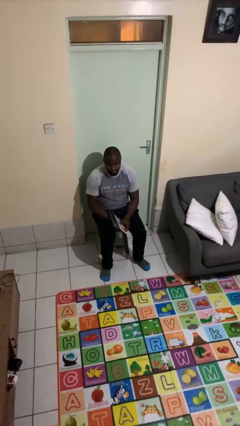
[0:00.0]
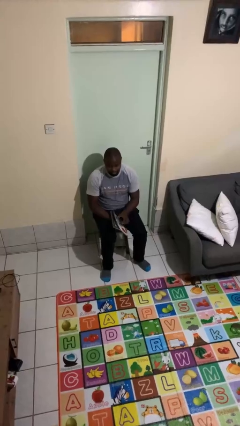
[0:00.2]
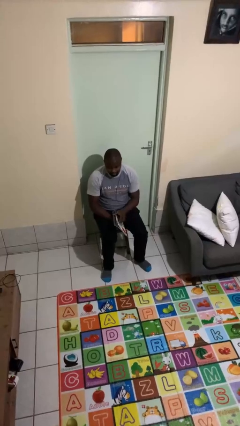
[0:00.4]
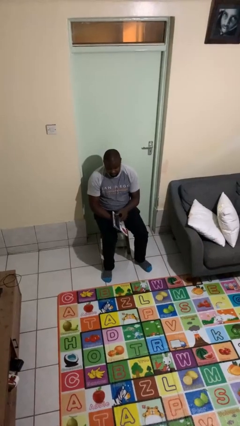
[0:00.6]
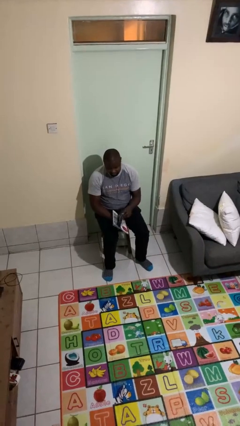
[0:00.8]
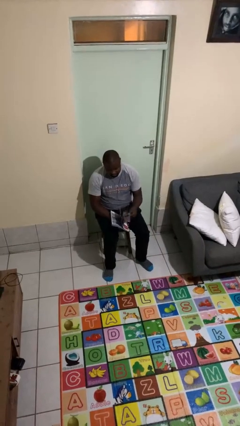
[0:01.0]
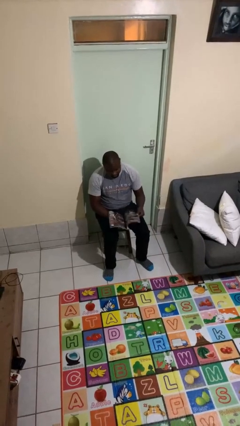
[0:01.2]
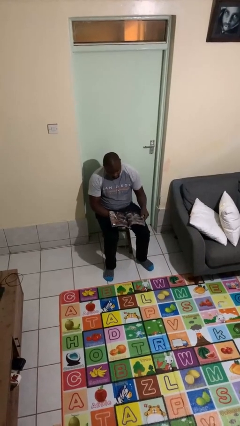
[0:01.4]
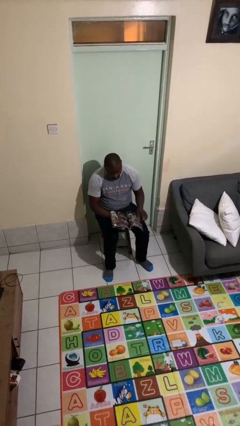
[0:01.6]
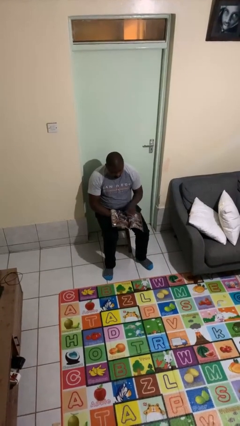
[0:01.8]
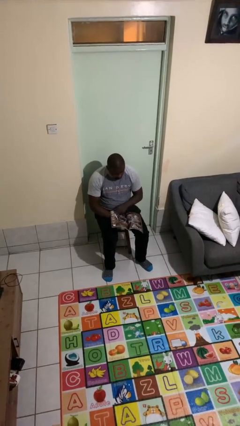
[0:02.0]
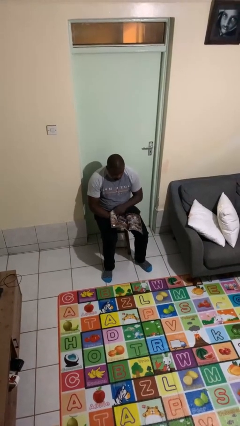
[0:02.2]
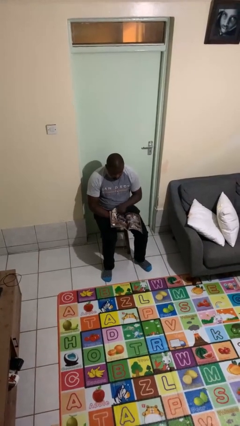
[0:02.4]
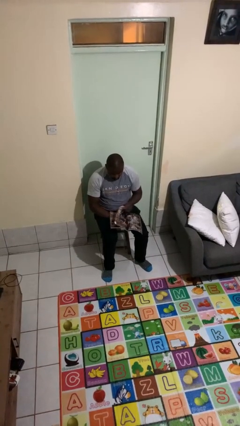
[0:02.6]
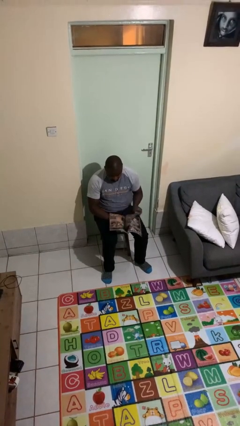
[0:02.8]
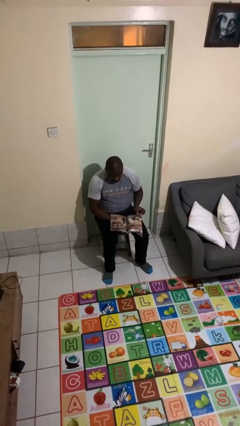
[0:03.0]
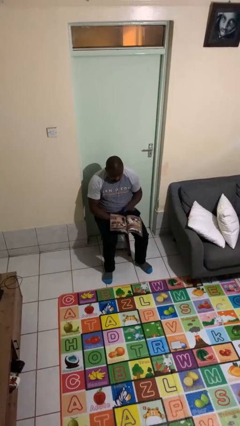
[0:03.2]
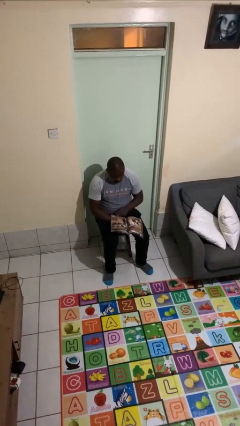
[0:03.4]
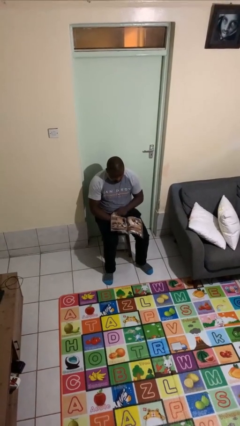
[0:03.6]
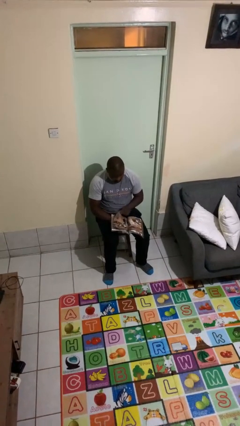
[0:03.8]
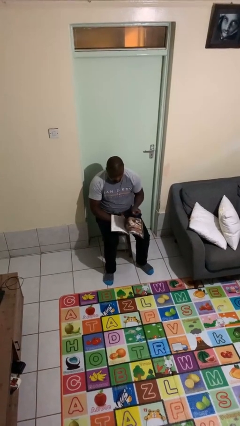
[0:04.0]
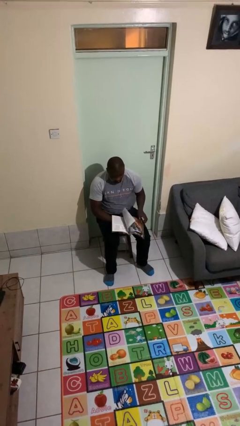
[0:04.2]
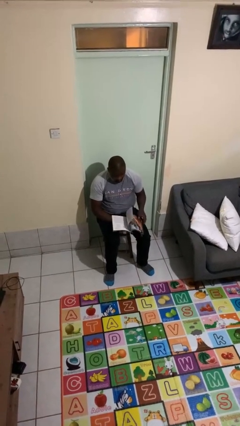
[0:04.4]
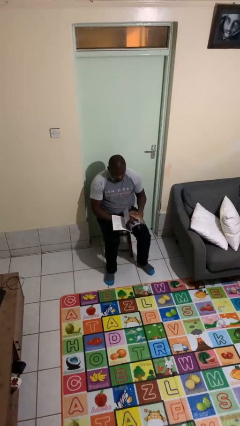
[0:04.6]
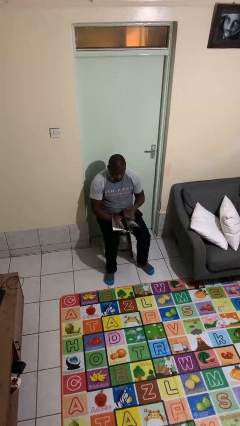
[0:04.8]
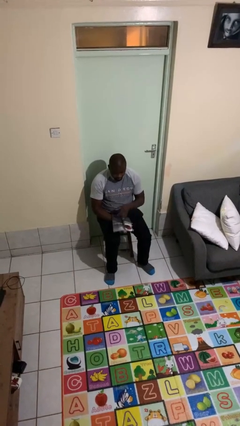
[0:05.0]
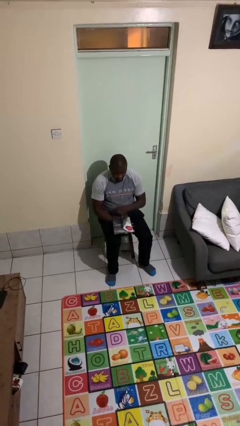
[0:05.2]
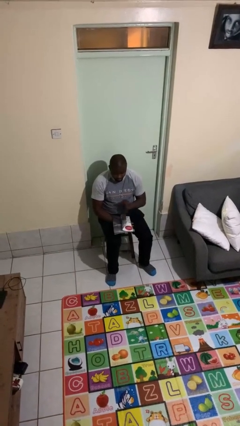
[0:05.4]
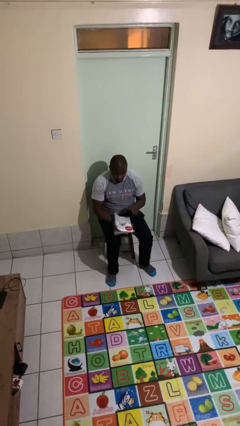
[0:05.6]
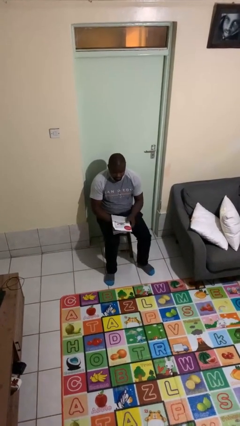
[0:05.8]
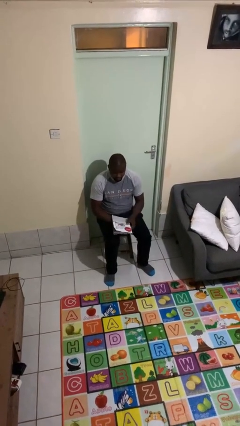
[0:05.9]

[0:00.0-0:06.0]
person reads magazine

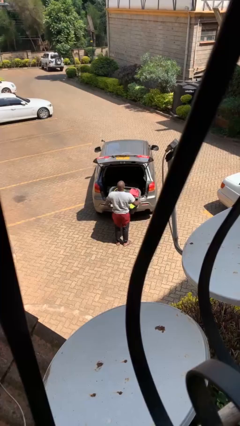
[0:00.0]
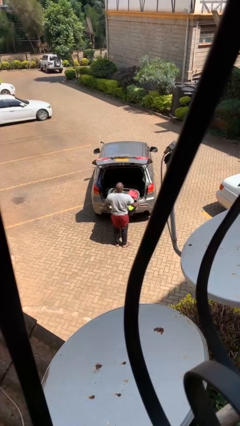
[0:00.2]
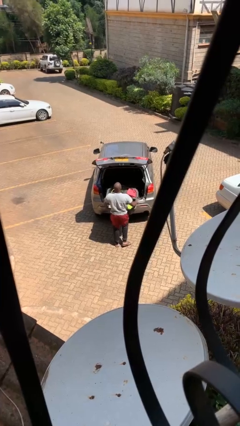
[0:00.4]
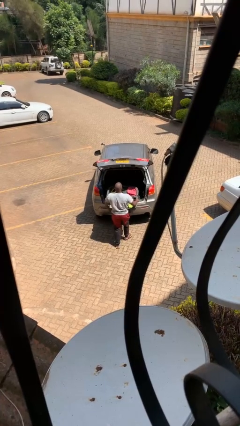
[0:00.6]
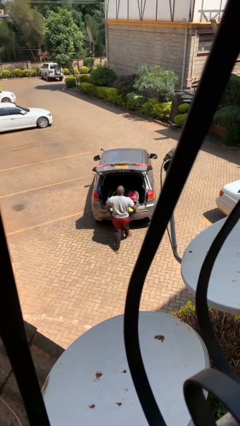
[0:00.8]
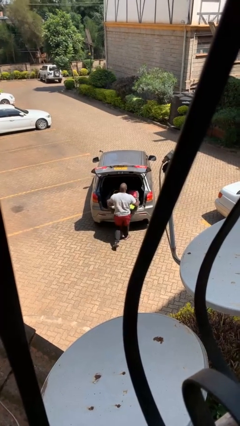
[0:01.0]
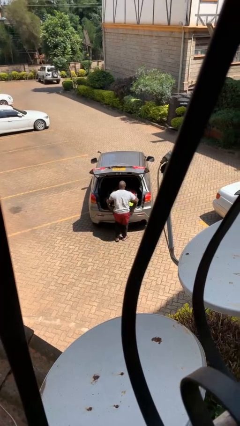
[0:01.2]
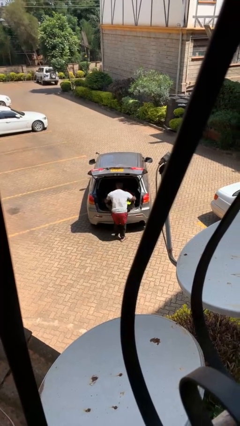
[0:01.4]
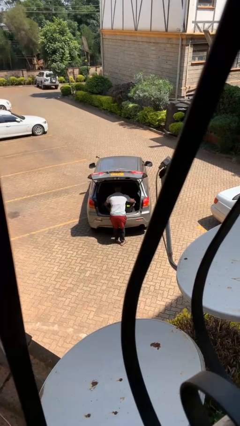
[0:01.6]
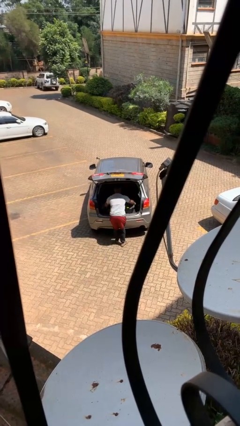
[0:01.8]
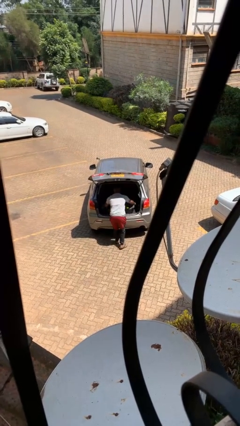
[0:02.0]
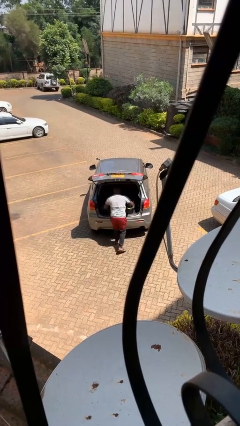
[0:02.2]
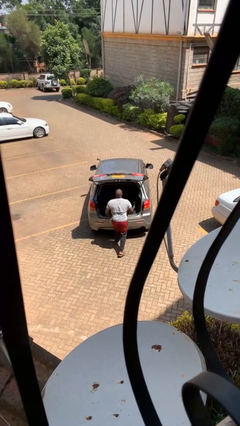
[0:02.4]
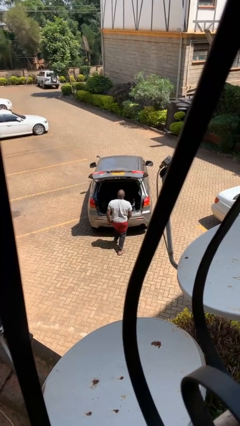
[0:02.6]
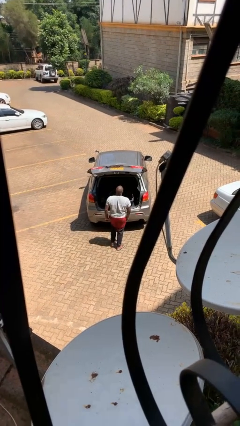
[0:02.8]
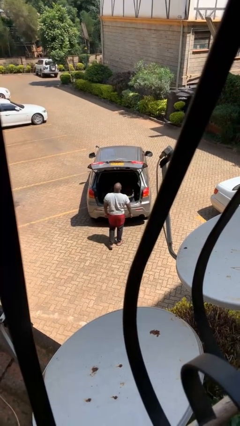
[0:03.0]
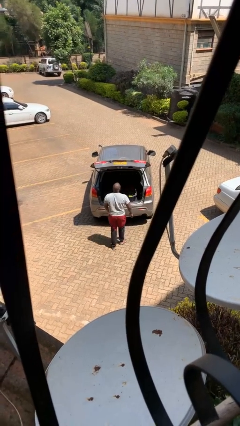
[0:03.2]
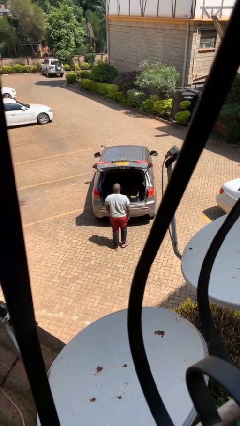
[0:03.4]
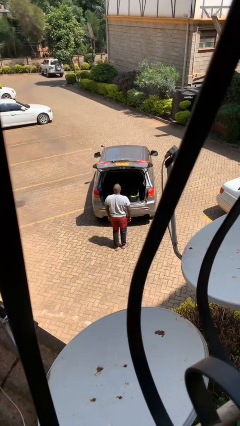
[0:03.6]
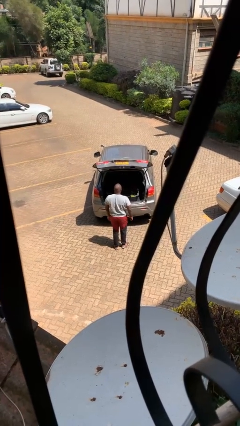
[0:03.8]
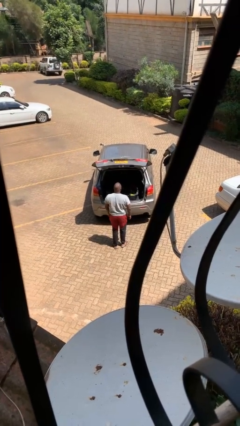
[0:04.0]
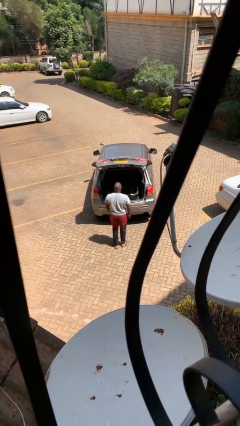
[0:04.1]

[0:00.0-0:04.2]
person loads car

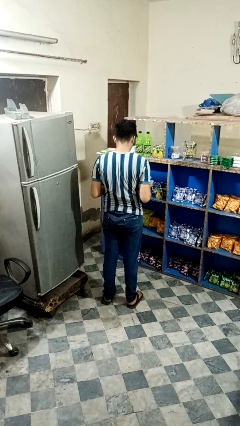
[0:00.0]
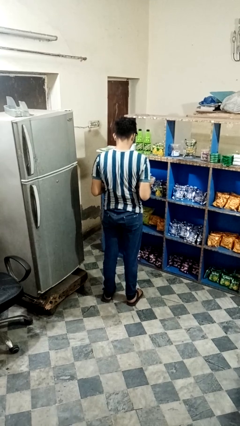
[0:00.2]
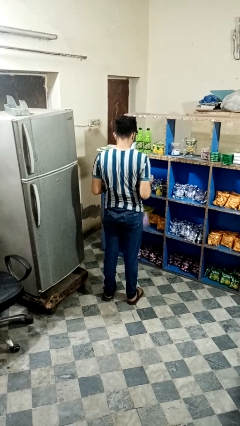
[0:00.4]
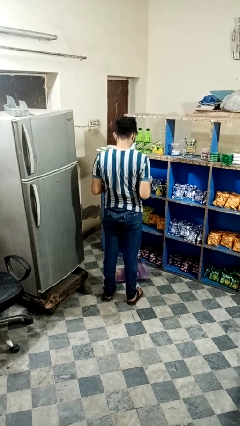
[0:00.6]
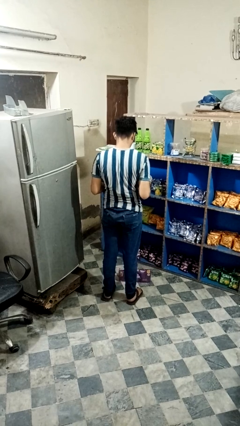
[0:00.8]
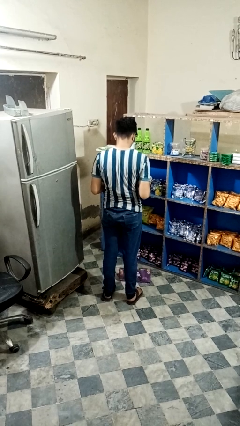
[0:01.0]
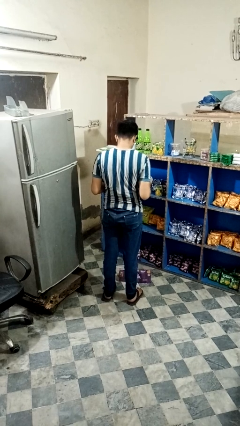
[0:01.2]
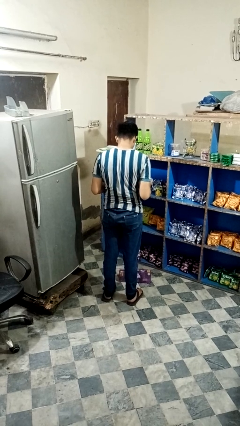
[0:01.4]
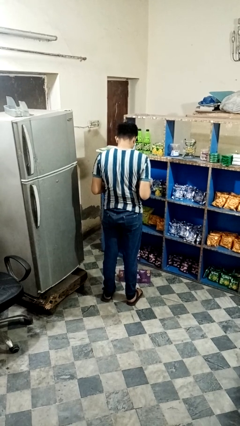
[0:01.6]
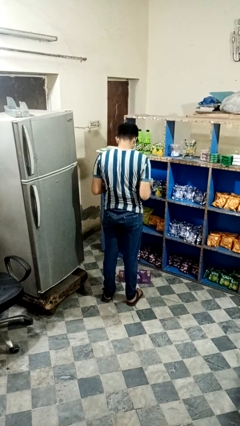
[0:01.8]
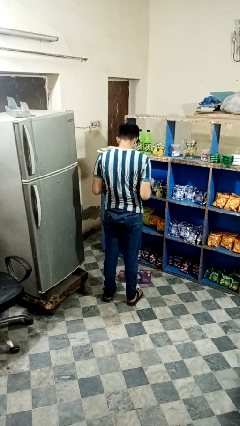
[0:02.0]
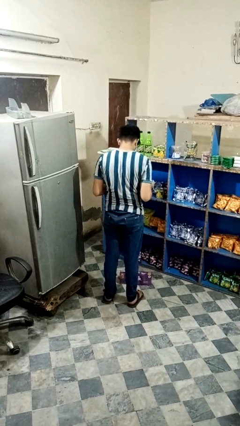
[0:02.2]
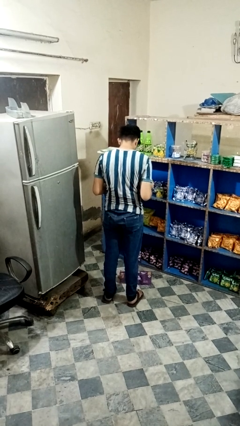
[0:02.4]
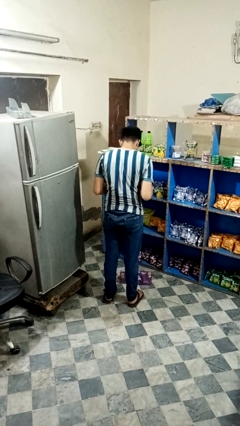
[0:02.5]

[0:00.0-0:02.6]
person drops object

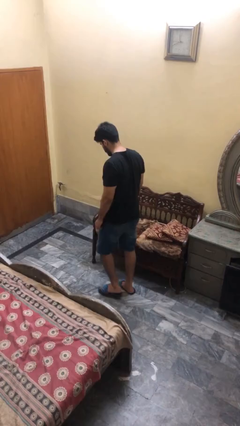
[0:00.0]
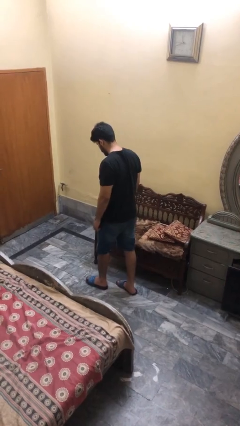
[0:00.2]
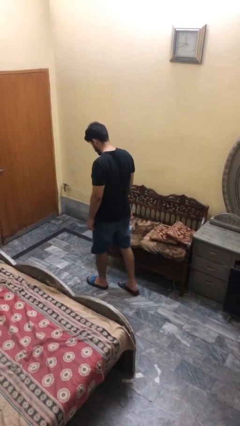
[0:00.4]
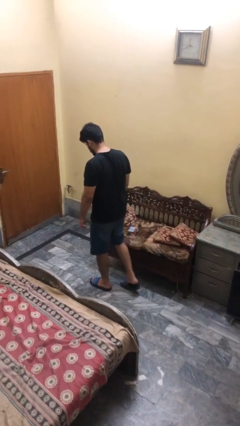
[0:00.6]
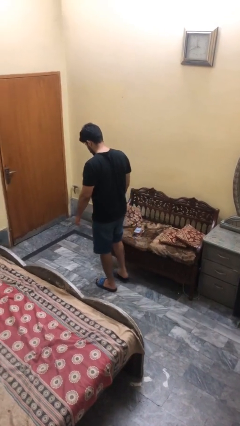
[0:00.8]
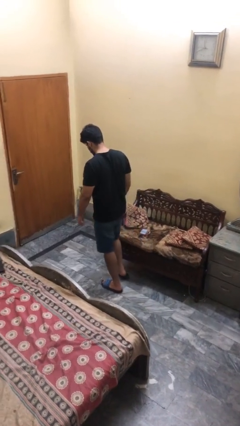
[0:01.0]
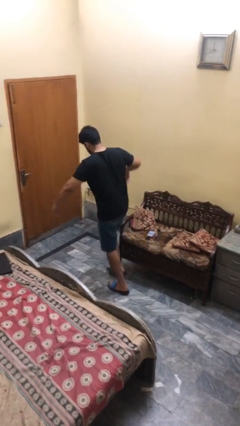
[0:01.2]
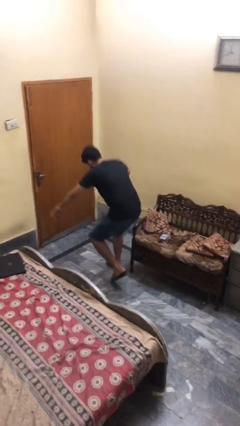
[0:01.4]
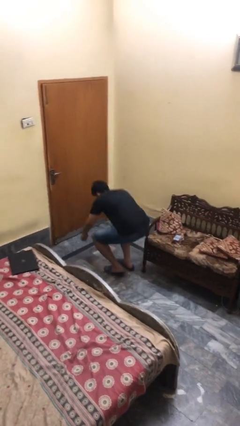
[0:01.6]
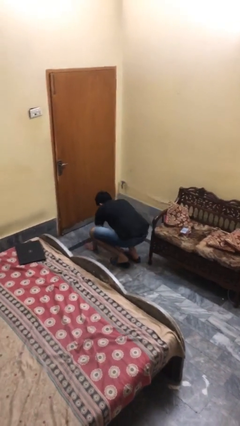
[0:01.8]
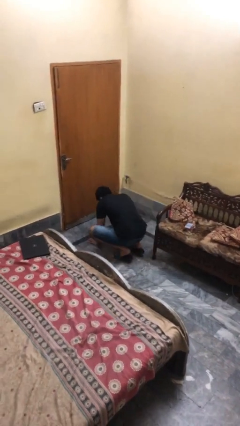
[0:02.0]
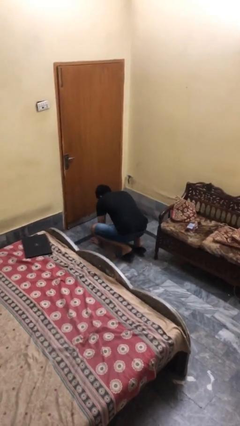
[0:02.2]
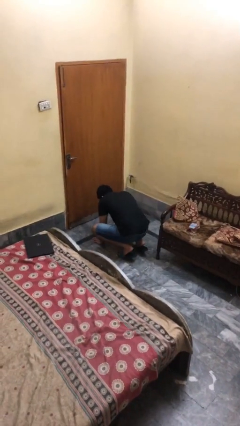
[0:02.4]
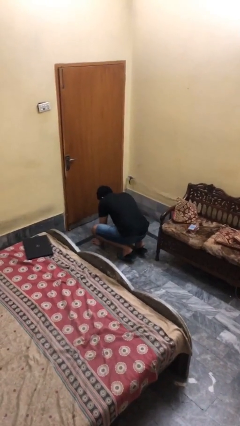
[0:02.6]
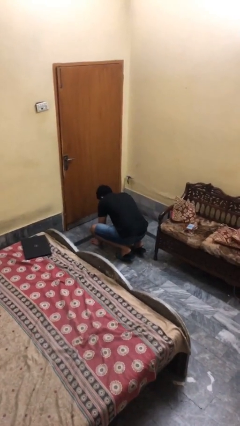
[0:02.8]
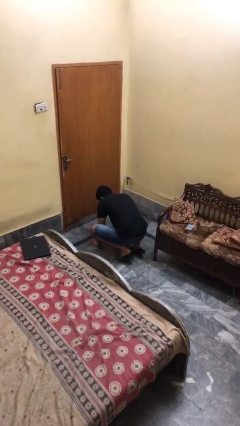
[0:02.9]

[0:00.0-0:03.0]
person trips on object on floor

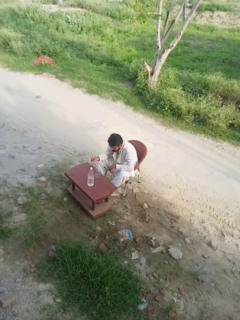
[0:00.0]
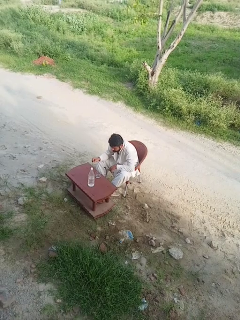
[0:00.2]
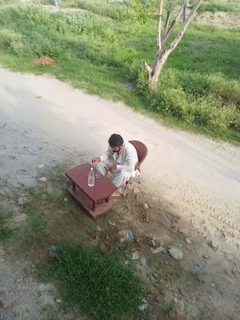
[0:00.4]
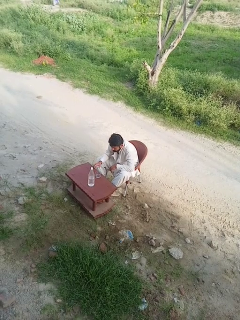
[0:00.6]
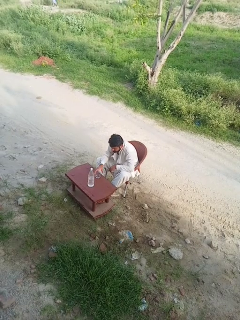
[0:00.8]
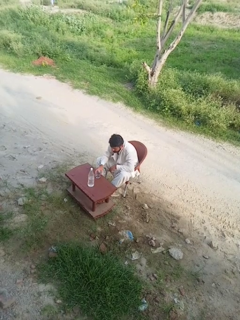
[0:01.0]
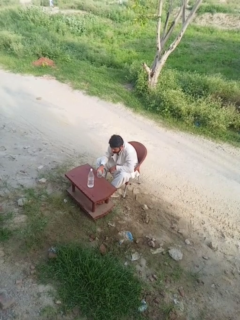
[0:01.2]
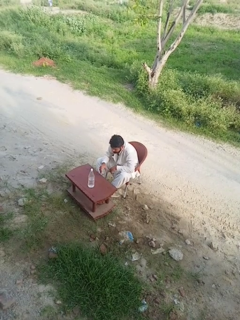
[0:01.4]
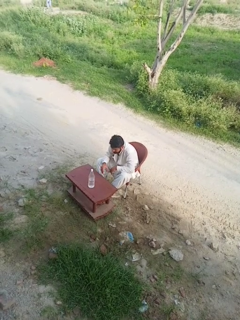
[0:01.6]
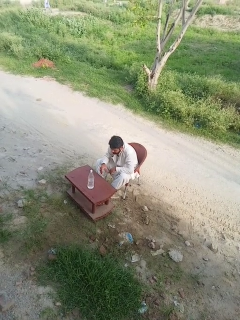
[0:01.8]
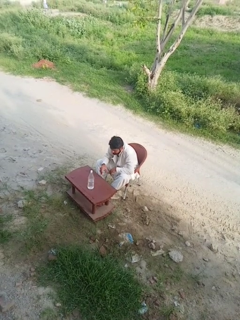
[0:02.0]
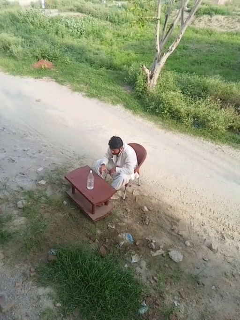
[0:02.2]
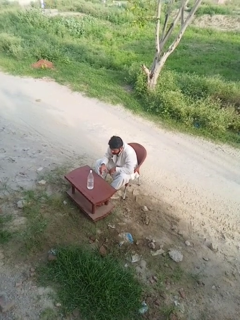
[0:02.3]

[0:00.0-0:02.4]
person picks up object from table
